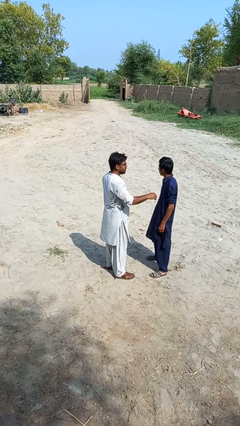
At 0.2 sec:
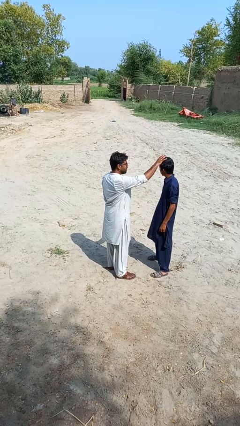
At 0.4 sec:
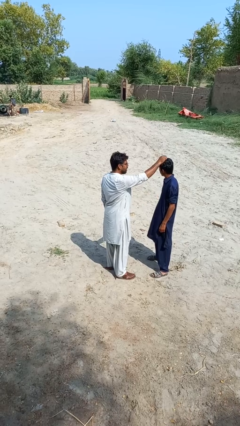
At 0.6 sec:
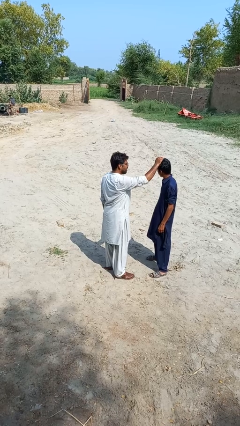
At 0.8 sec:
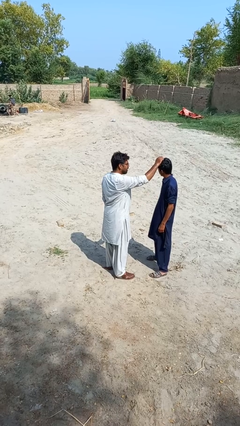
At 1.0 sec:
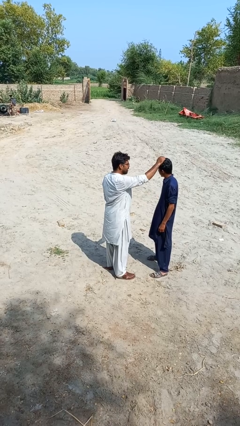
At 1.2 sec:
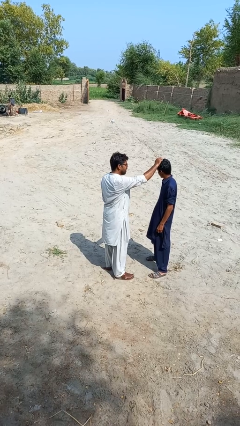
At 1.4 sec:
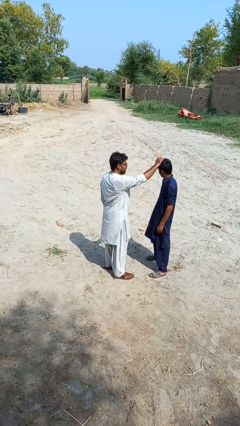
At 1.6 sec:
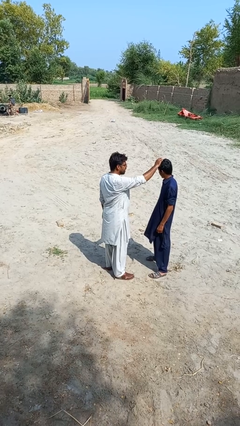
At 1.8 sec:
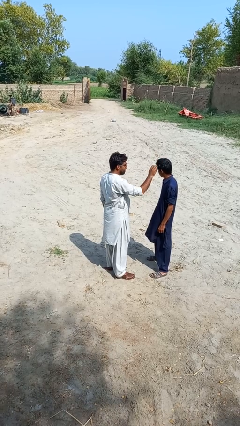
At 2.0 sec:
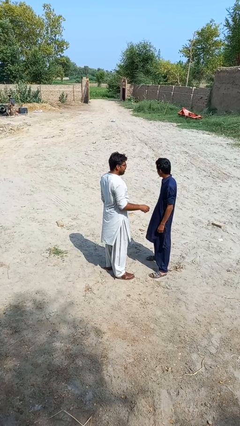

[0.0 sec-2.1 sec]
person grabs person by hair

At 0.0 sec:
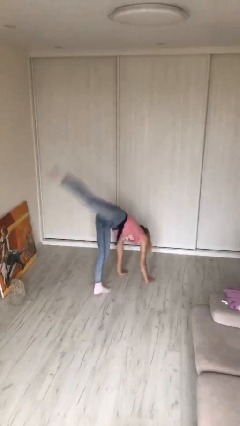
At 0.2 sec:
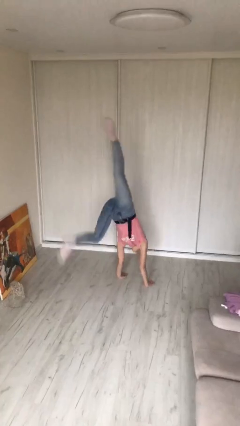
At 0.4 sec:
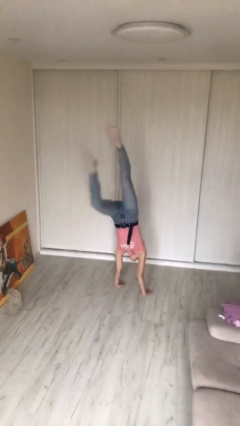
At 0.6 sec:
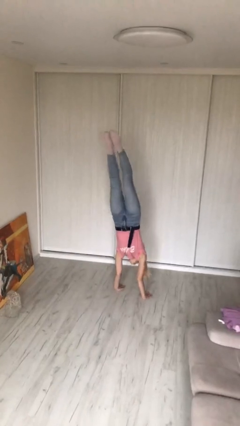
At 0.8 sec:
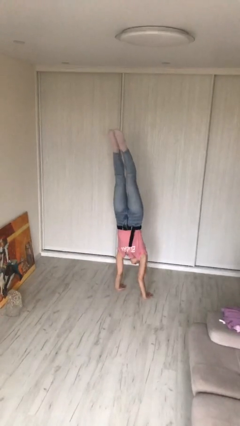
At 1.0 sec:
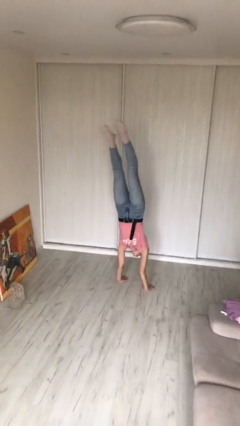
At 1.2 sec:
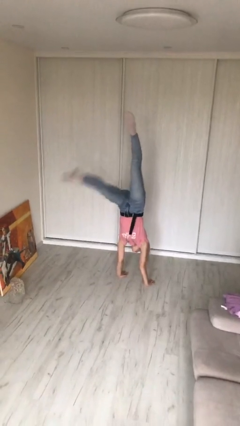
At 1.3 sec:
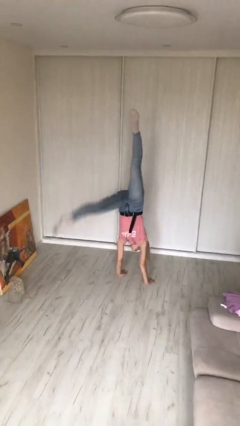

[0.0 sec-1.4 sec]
person handstand

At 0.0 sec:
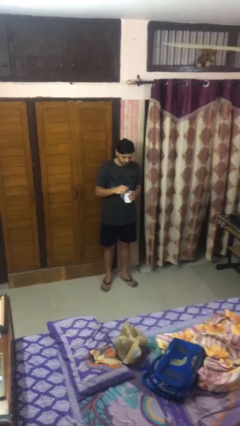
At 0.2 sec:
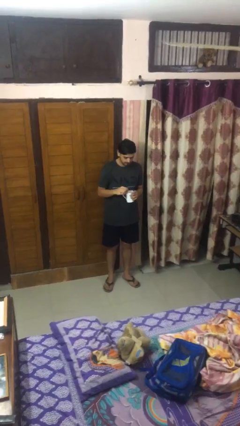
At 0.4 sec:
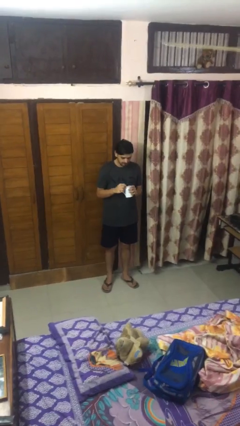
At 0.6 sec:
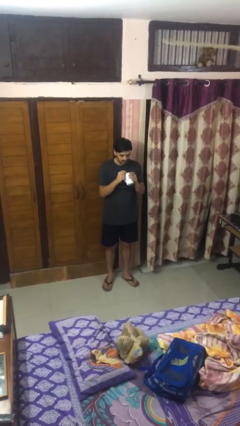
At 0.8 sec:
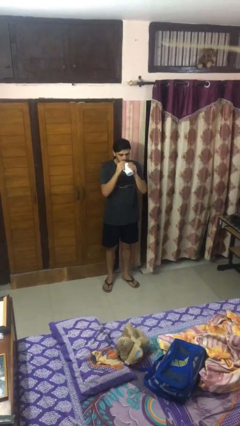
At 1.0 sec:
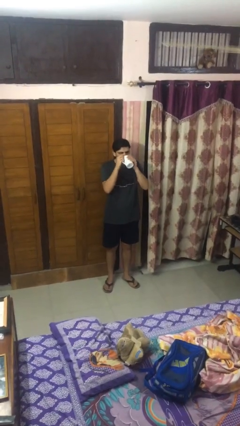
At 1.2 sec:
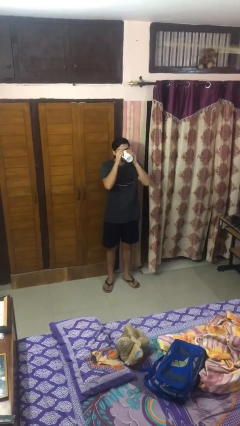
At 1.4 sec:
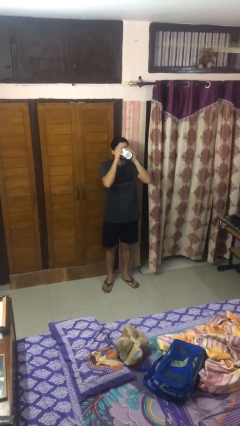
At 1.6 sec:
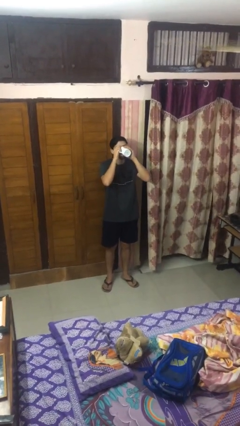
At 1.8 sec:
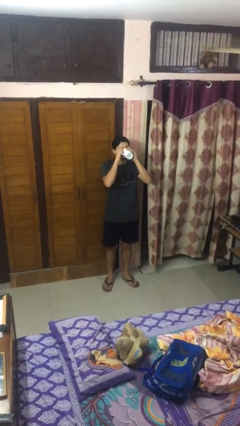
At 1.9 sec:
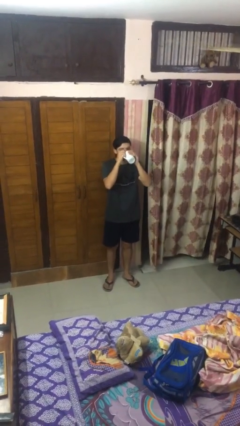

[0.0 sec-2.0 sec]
person drinks from mug

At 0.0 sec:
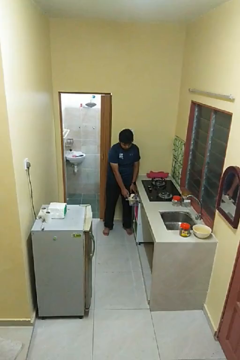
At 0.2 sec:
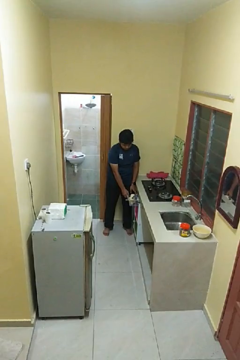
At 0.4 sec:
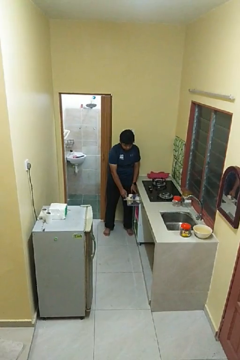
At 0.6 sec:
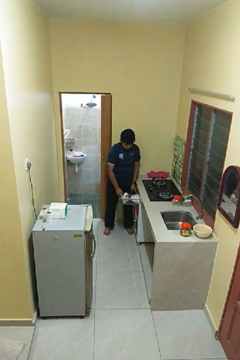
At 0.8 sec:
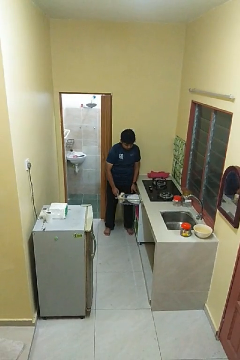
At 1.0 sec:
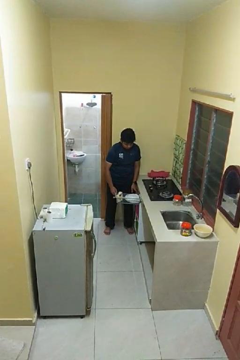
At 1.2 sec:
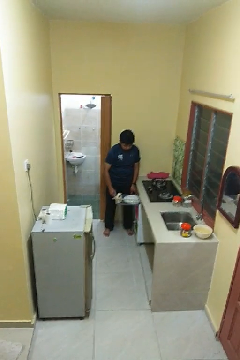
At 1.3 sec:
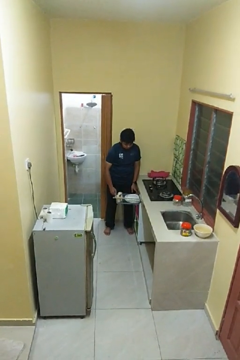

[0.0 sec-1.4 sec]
person opens kitchen drawer

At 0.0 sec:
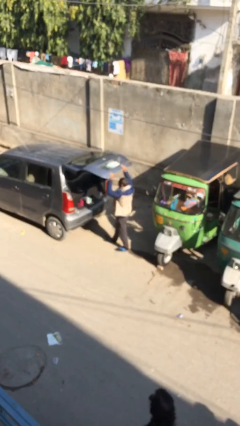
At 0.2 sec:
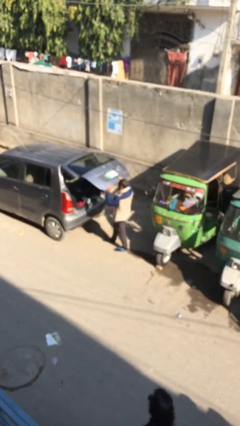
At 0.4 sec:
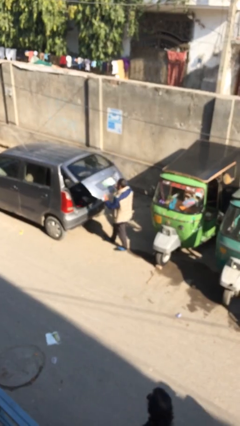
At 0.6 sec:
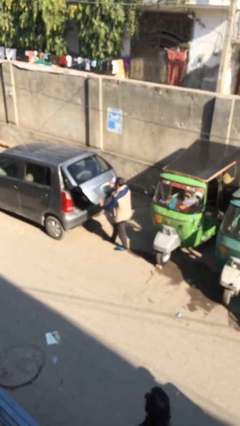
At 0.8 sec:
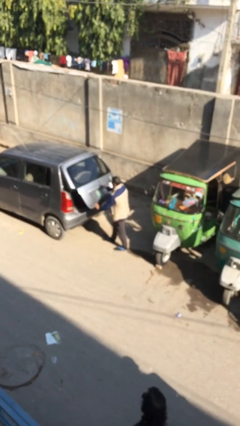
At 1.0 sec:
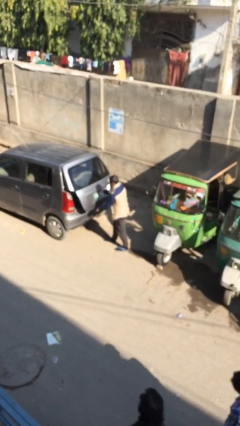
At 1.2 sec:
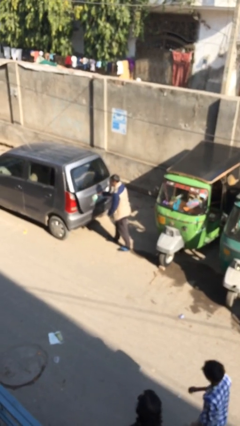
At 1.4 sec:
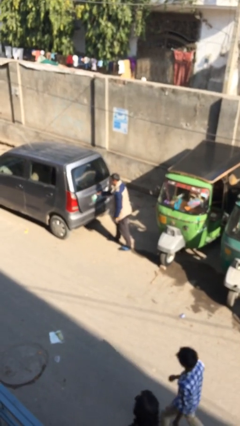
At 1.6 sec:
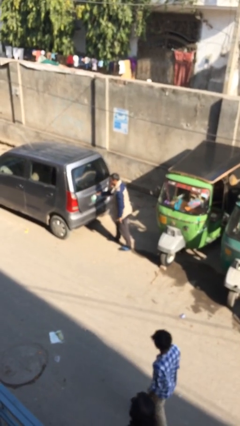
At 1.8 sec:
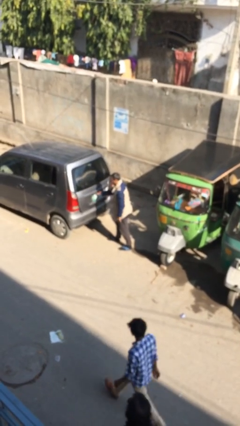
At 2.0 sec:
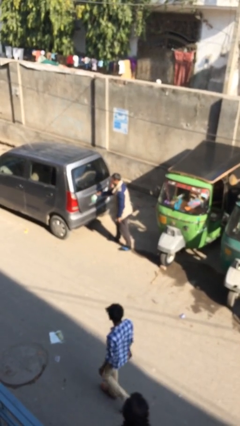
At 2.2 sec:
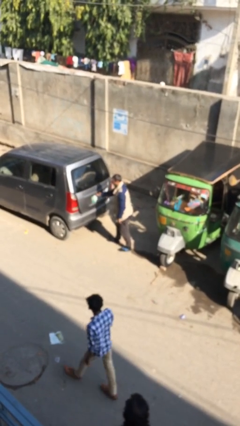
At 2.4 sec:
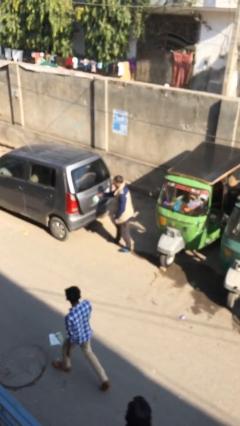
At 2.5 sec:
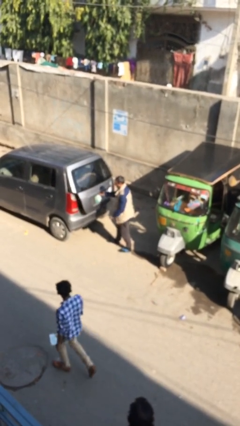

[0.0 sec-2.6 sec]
person closes car trunk

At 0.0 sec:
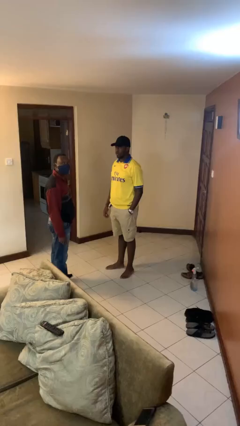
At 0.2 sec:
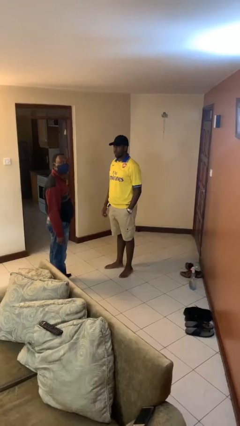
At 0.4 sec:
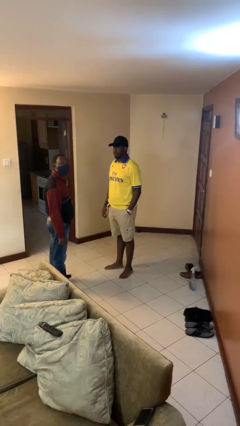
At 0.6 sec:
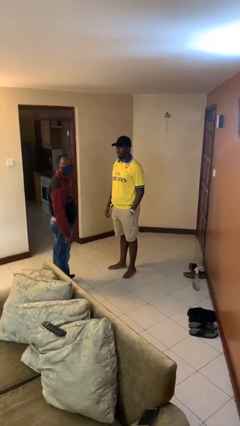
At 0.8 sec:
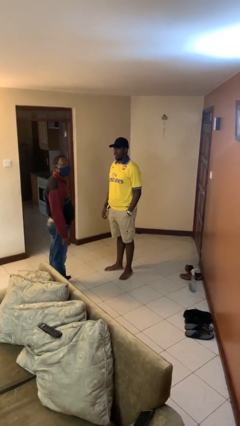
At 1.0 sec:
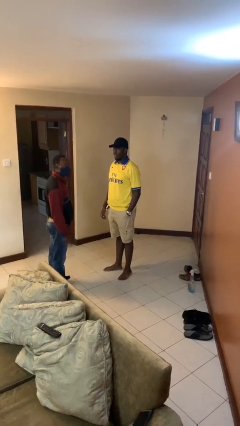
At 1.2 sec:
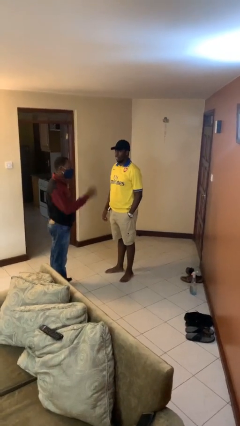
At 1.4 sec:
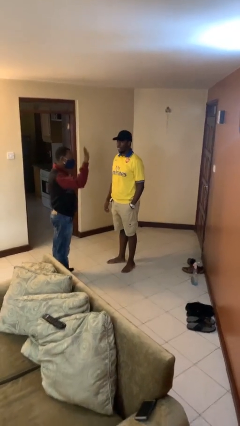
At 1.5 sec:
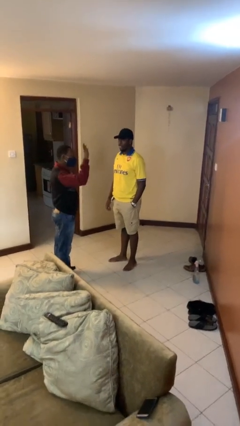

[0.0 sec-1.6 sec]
person highfives hand

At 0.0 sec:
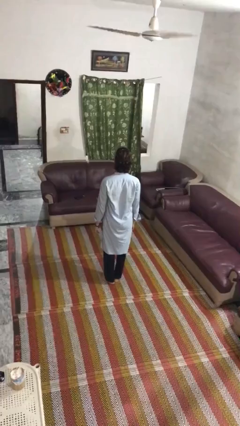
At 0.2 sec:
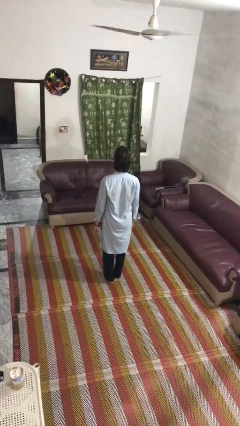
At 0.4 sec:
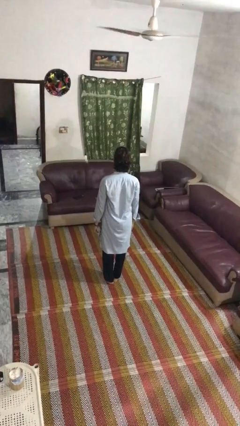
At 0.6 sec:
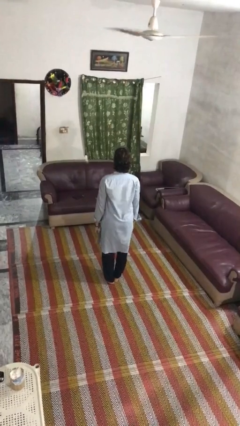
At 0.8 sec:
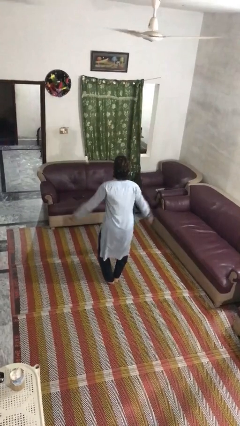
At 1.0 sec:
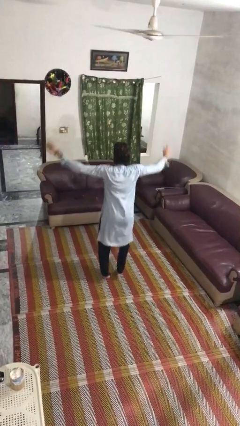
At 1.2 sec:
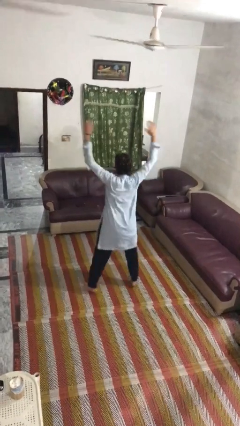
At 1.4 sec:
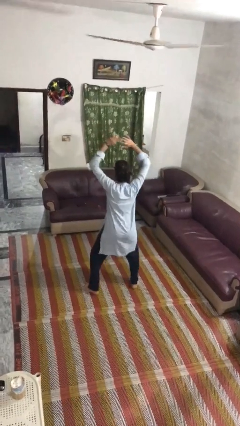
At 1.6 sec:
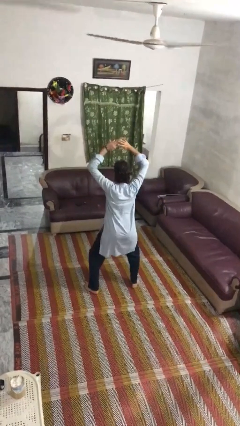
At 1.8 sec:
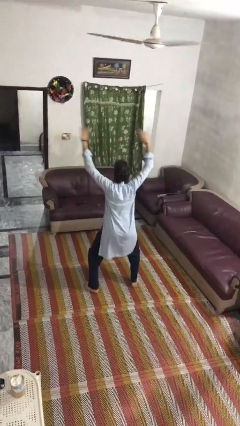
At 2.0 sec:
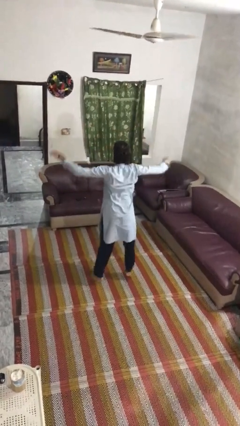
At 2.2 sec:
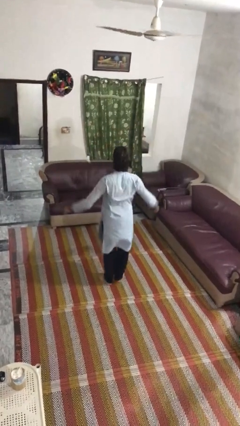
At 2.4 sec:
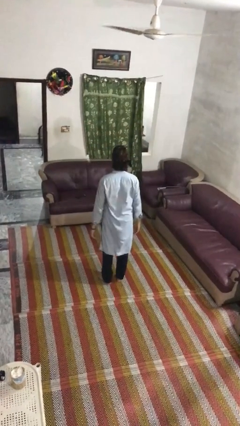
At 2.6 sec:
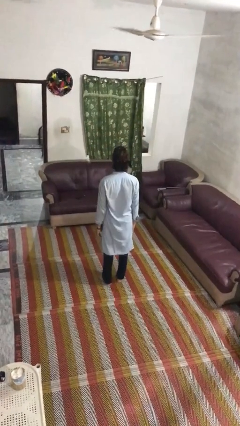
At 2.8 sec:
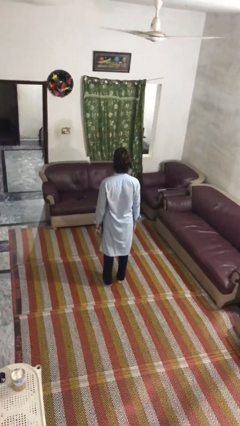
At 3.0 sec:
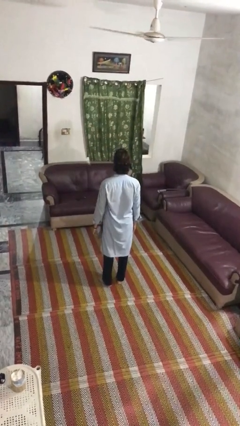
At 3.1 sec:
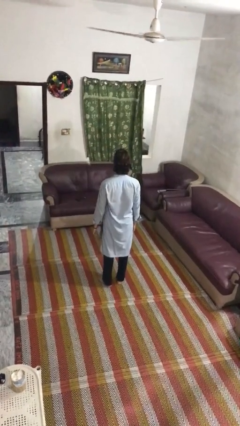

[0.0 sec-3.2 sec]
person exercises with jumping jacks

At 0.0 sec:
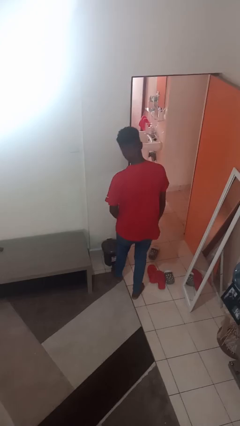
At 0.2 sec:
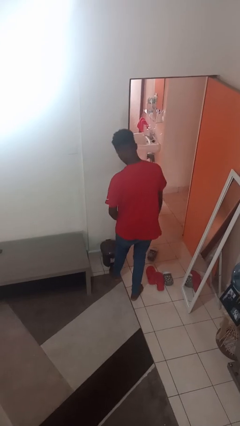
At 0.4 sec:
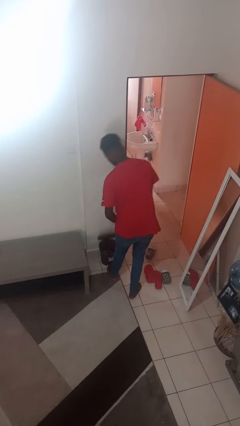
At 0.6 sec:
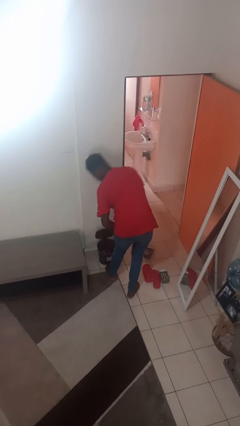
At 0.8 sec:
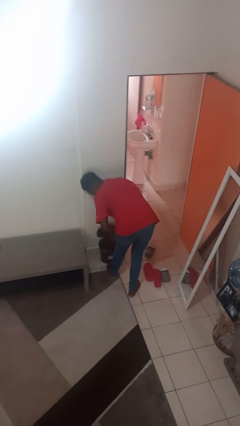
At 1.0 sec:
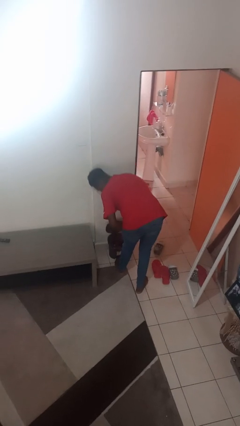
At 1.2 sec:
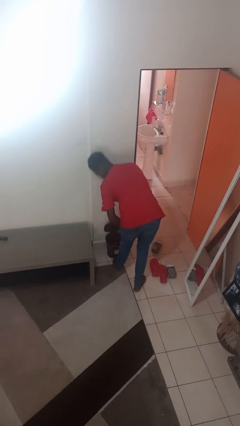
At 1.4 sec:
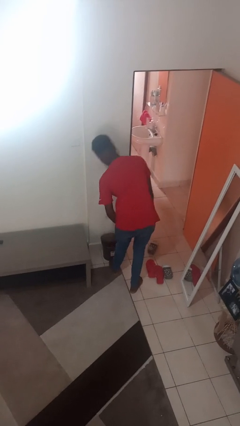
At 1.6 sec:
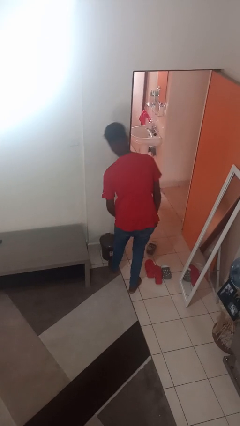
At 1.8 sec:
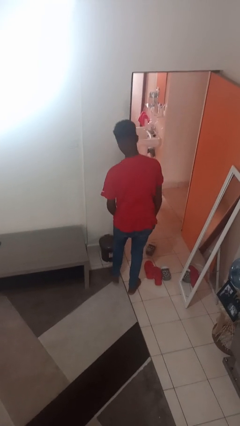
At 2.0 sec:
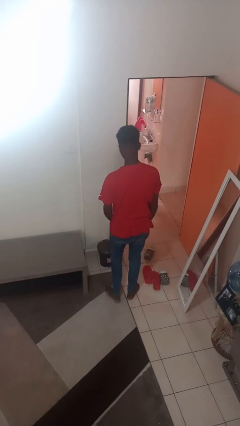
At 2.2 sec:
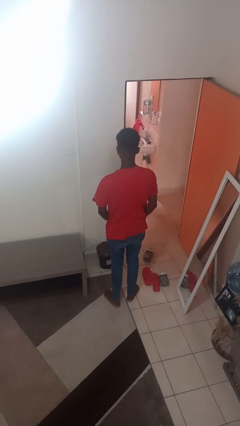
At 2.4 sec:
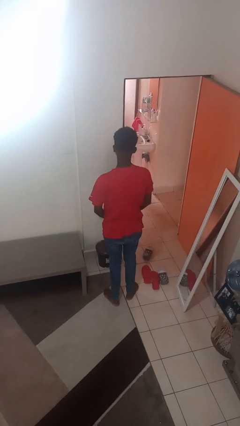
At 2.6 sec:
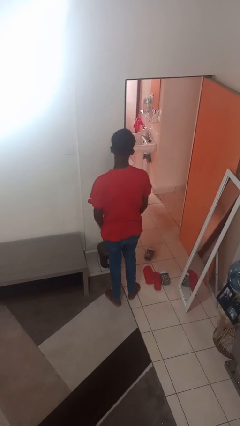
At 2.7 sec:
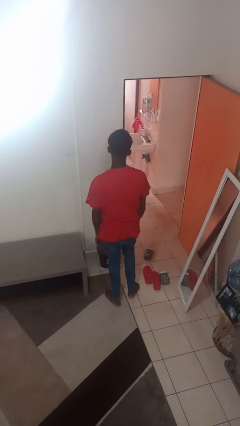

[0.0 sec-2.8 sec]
person discards trash
